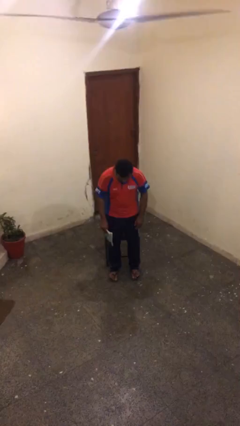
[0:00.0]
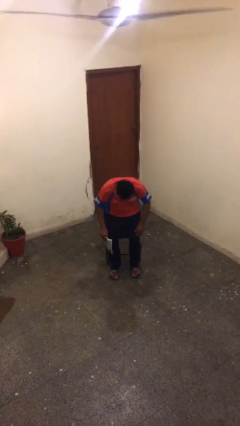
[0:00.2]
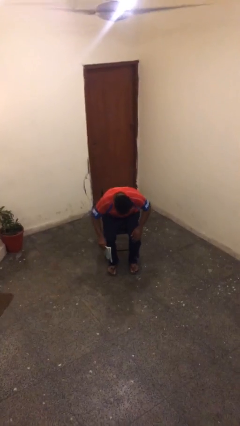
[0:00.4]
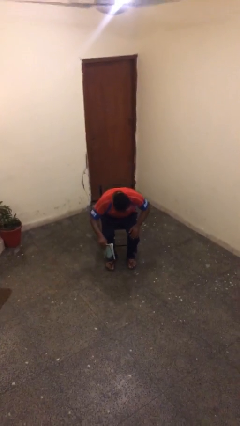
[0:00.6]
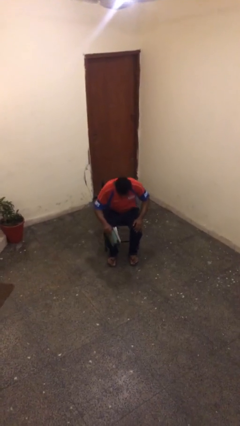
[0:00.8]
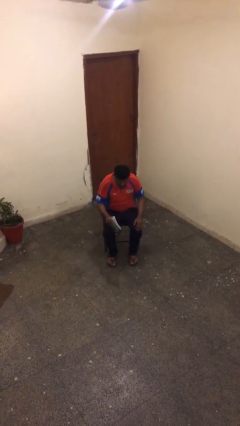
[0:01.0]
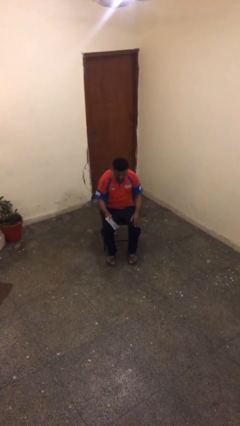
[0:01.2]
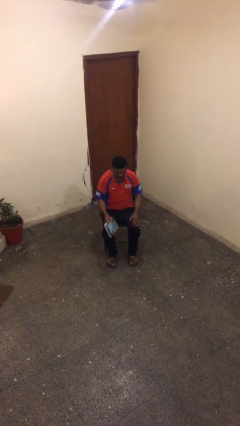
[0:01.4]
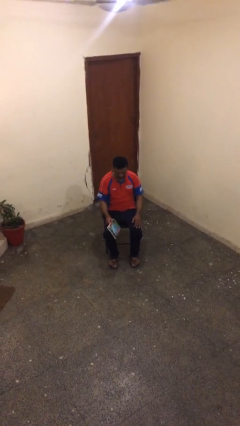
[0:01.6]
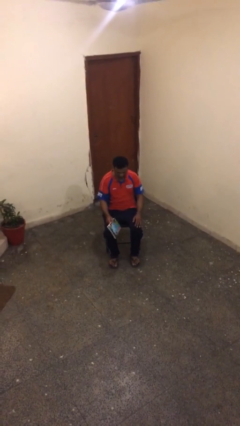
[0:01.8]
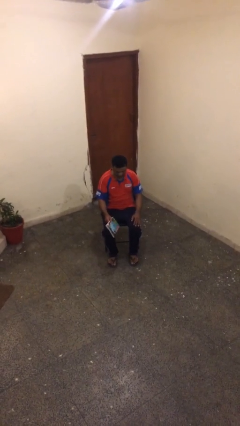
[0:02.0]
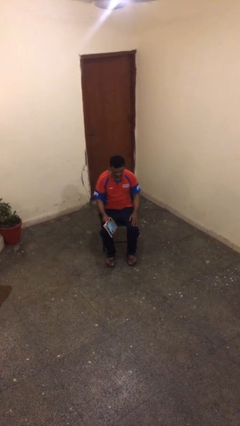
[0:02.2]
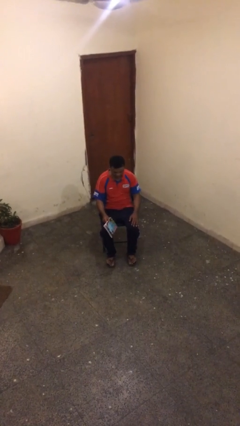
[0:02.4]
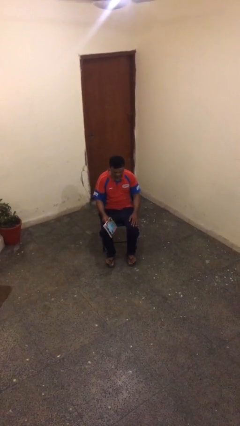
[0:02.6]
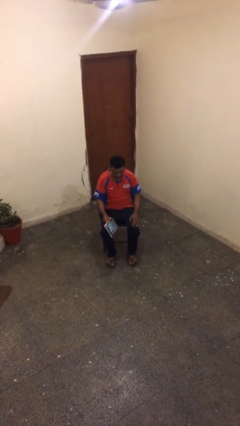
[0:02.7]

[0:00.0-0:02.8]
person sits down

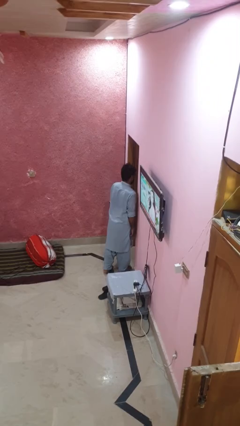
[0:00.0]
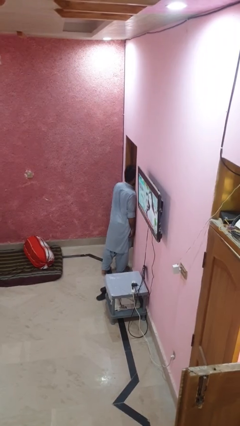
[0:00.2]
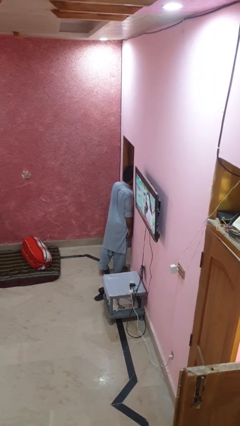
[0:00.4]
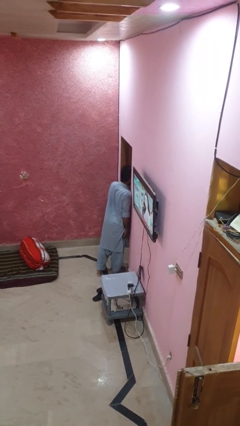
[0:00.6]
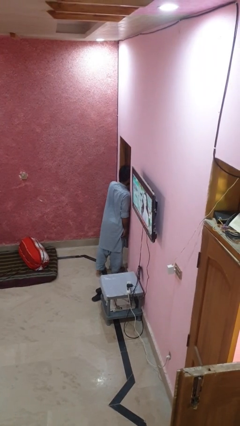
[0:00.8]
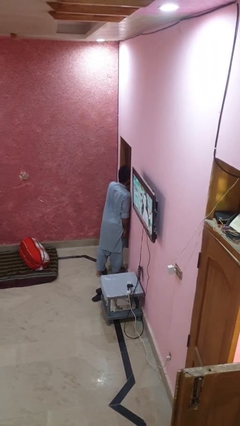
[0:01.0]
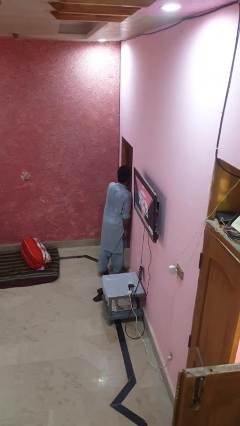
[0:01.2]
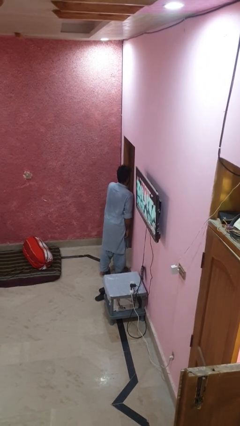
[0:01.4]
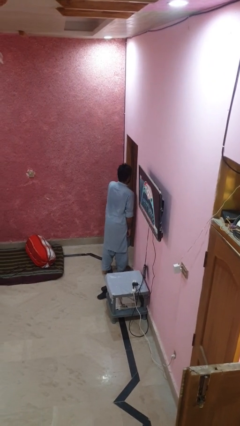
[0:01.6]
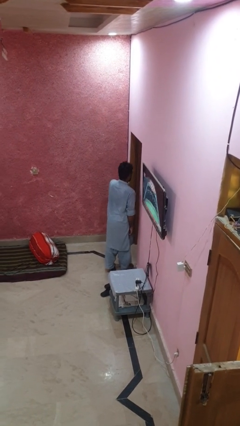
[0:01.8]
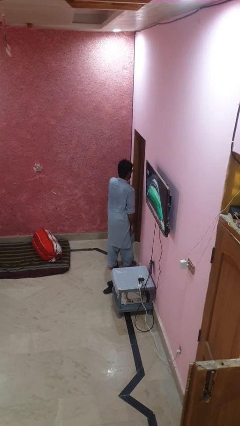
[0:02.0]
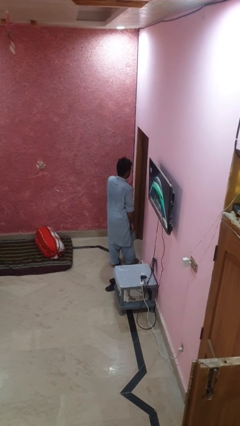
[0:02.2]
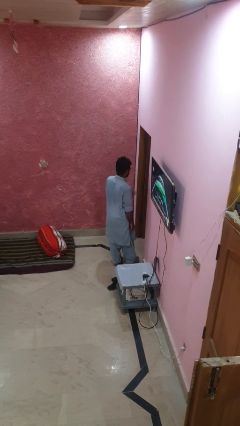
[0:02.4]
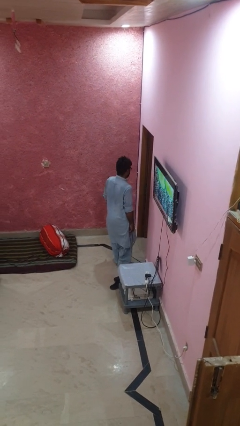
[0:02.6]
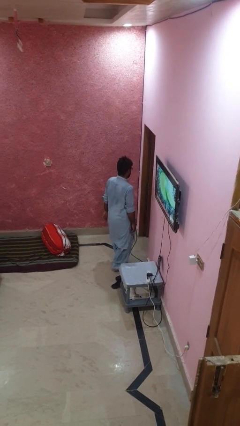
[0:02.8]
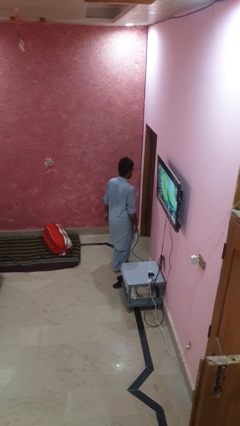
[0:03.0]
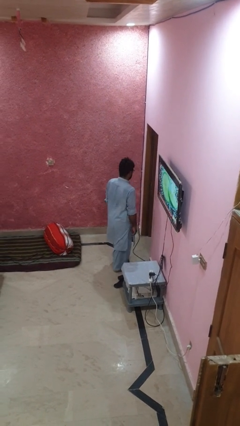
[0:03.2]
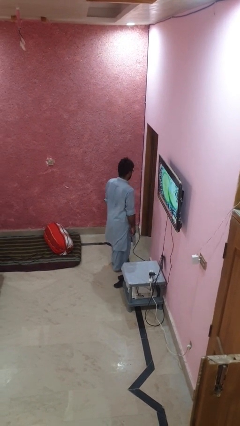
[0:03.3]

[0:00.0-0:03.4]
person bumps into wall

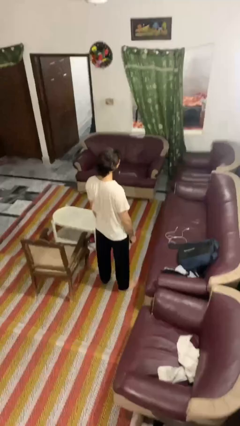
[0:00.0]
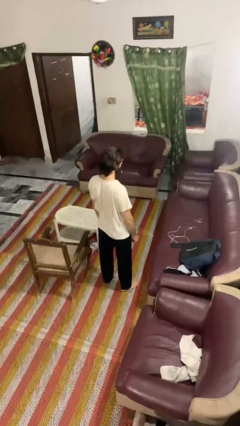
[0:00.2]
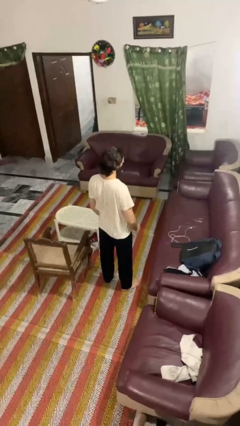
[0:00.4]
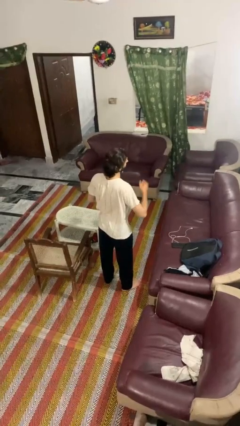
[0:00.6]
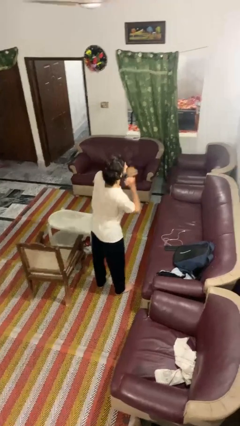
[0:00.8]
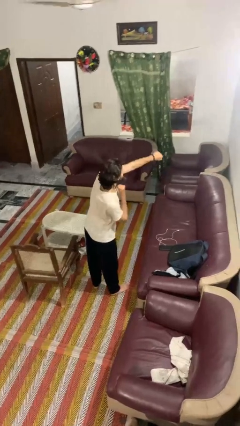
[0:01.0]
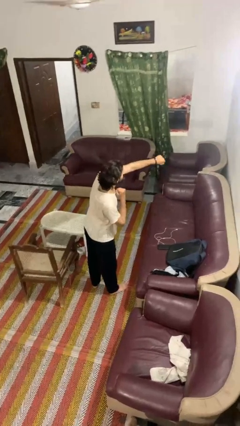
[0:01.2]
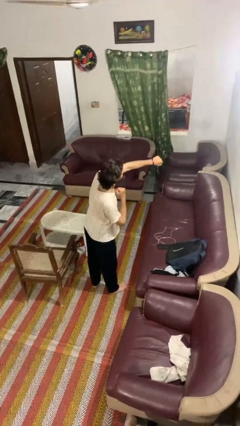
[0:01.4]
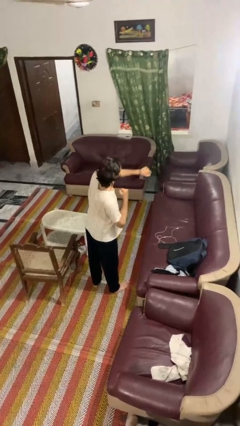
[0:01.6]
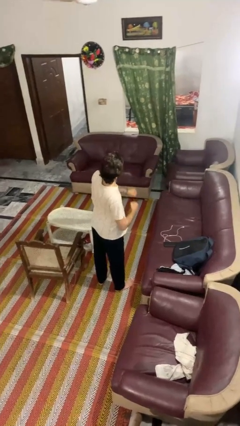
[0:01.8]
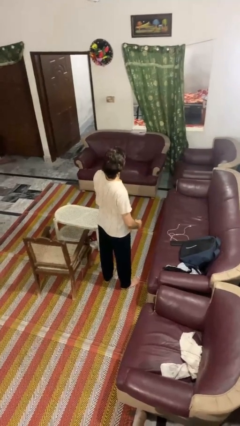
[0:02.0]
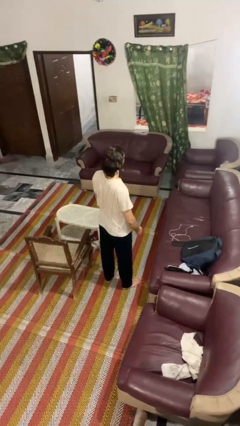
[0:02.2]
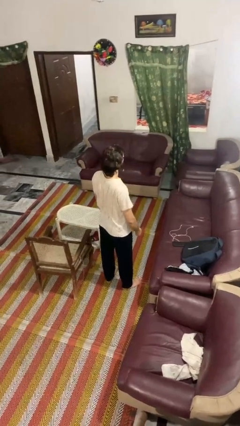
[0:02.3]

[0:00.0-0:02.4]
person punches

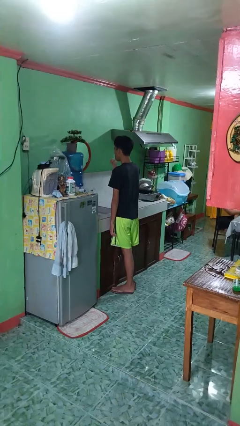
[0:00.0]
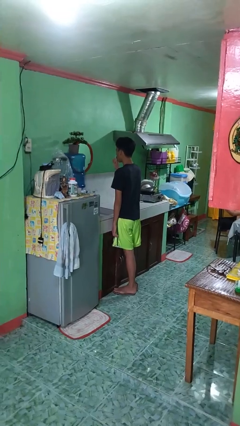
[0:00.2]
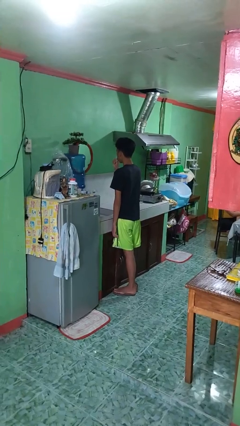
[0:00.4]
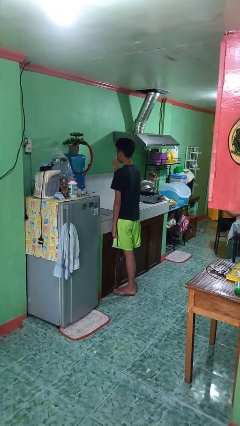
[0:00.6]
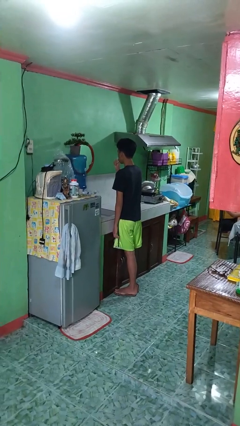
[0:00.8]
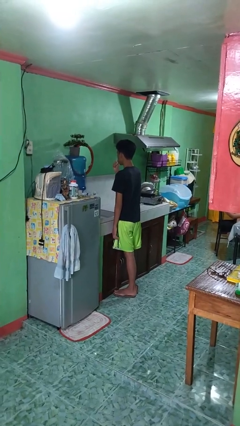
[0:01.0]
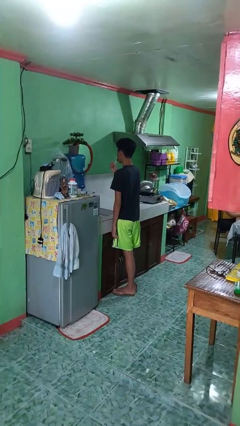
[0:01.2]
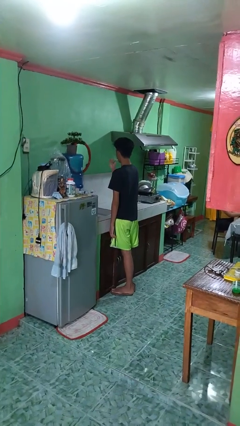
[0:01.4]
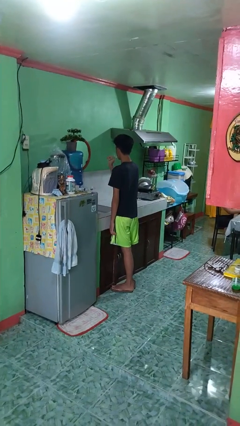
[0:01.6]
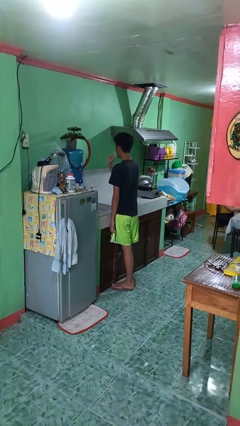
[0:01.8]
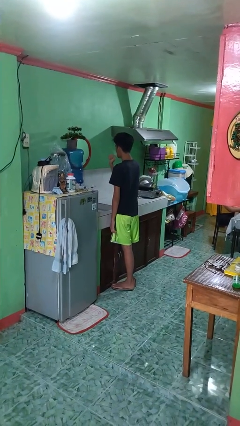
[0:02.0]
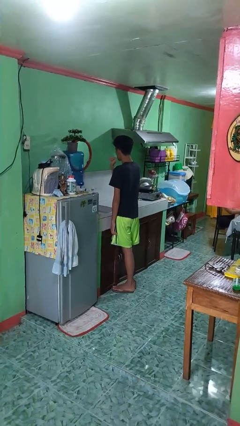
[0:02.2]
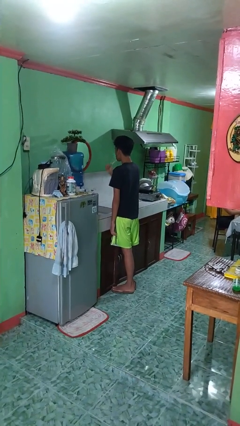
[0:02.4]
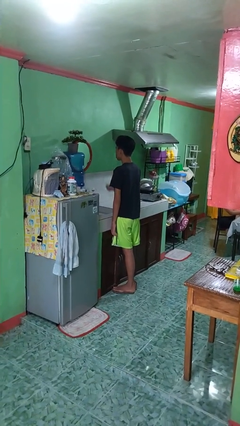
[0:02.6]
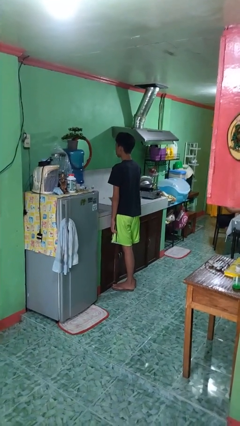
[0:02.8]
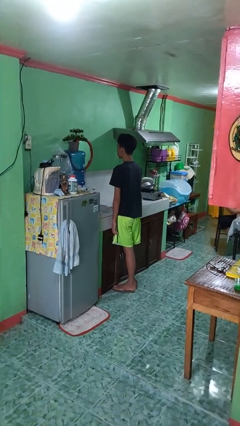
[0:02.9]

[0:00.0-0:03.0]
person brushes teeth

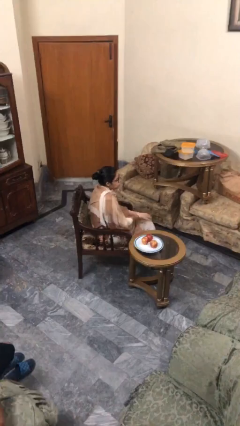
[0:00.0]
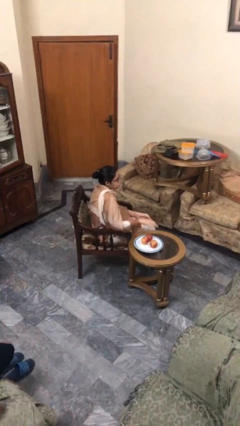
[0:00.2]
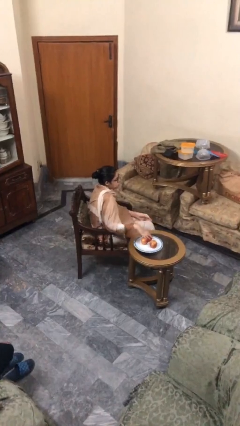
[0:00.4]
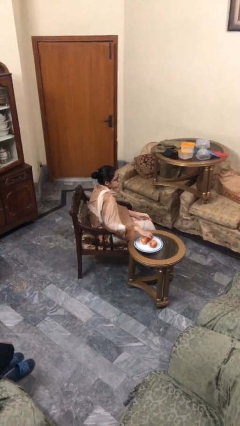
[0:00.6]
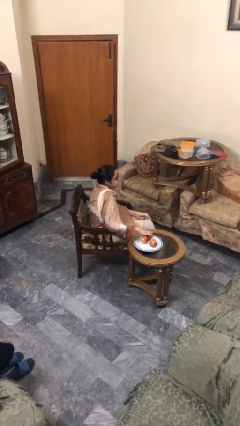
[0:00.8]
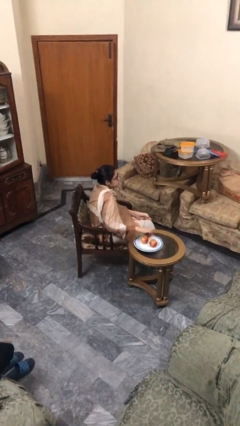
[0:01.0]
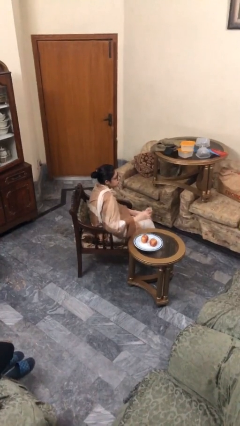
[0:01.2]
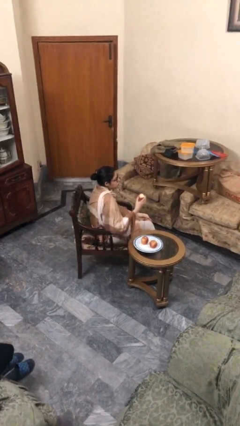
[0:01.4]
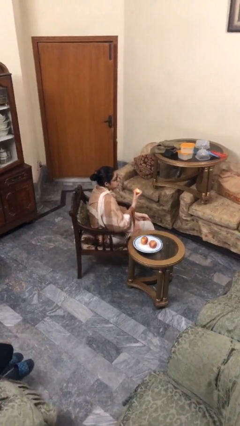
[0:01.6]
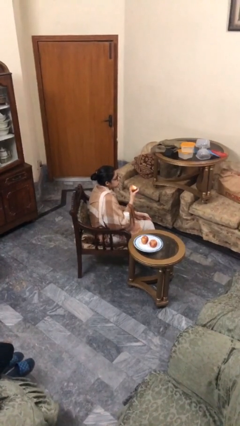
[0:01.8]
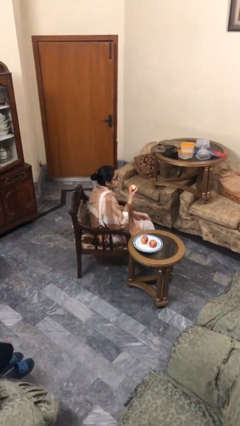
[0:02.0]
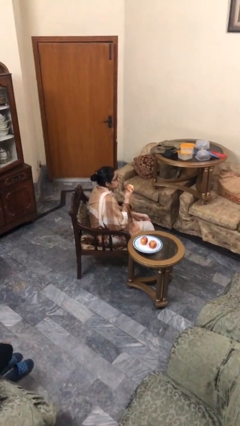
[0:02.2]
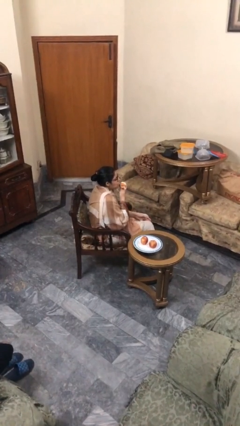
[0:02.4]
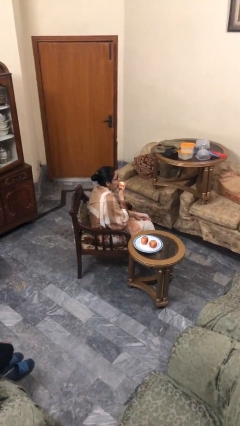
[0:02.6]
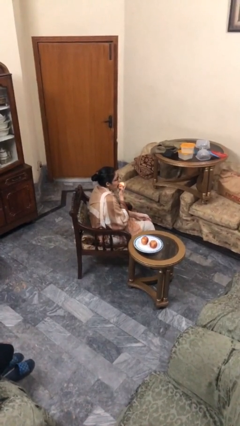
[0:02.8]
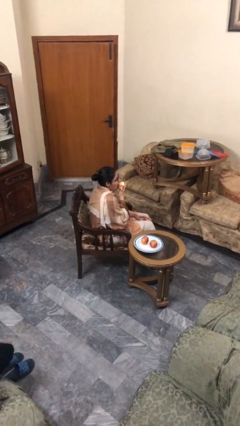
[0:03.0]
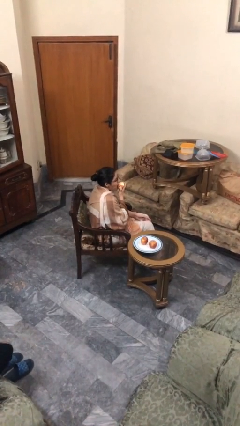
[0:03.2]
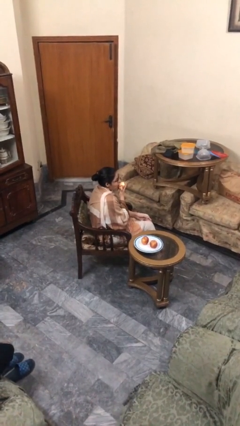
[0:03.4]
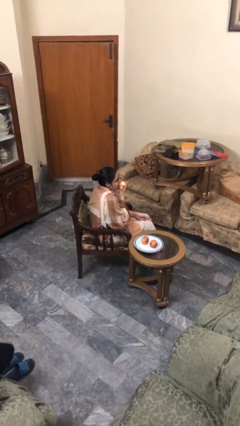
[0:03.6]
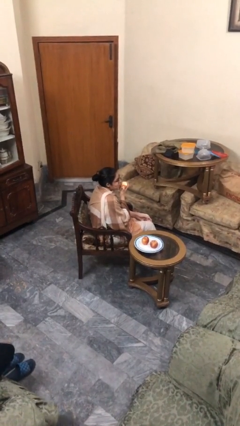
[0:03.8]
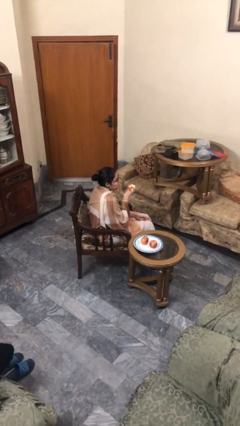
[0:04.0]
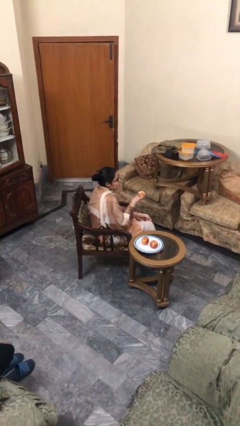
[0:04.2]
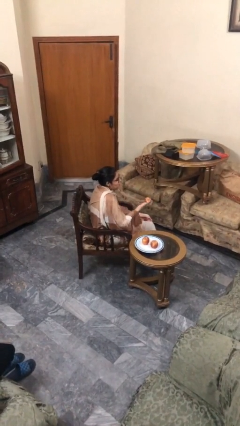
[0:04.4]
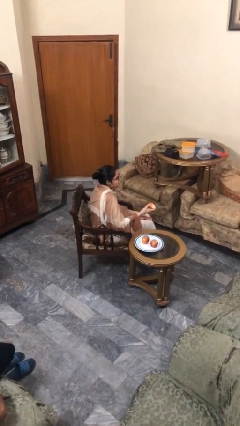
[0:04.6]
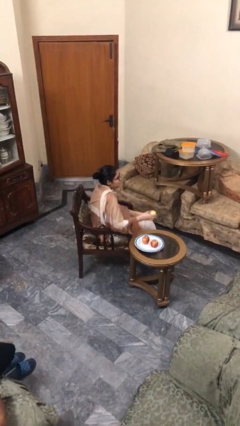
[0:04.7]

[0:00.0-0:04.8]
person eats apple

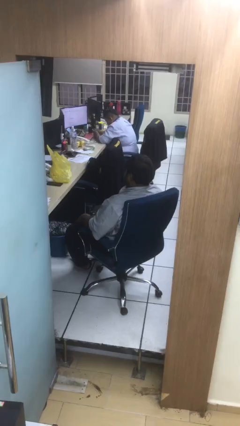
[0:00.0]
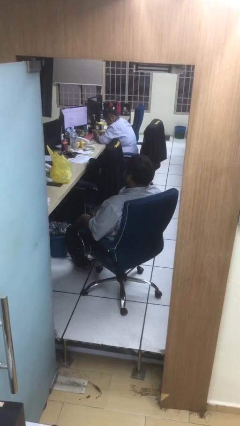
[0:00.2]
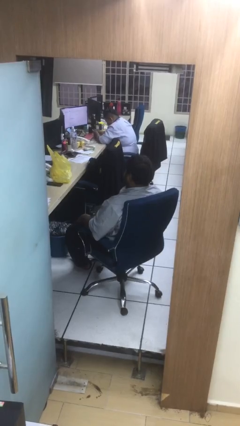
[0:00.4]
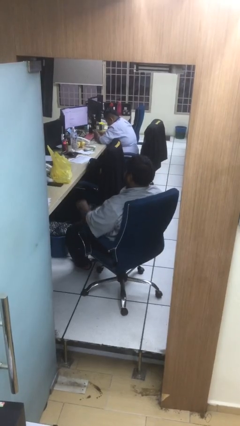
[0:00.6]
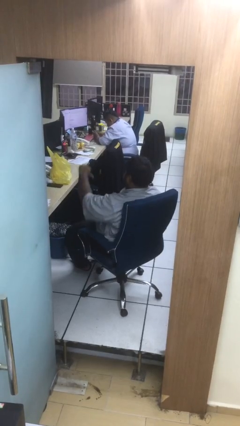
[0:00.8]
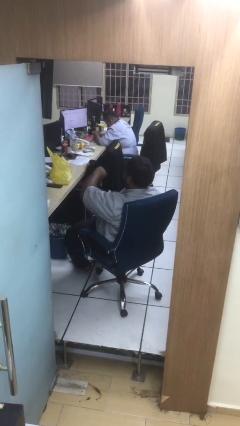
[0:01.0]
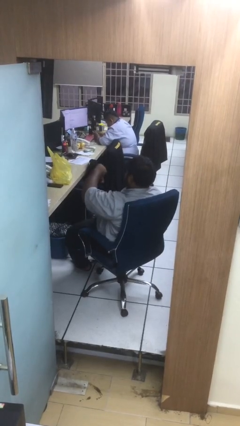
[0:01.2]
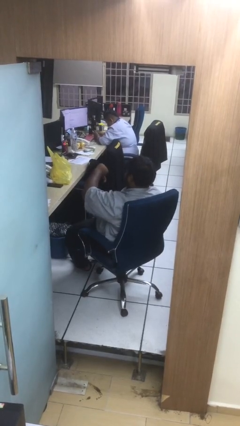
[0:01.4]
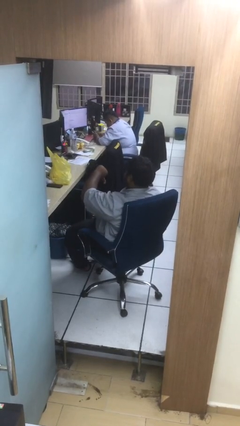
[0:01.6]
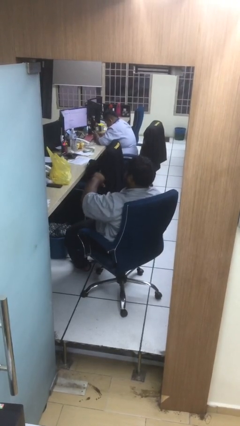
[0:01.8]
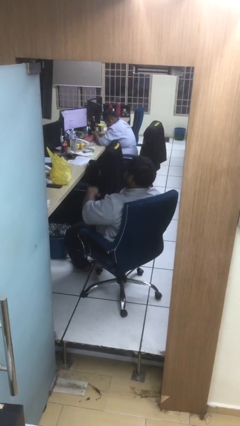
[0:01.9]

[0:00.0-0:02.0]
person gestures thumbs down
